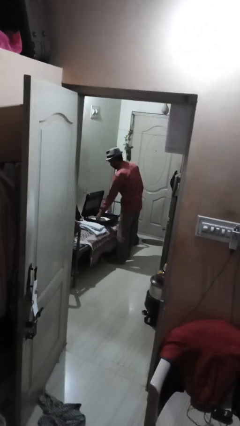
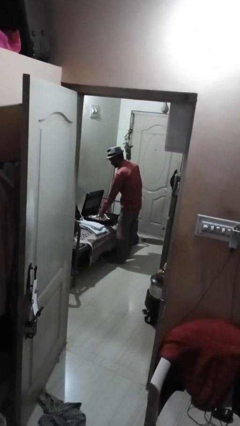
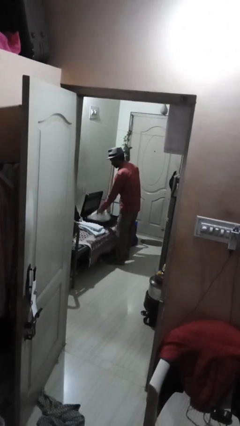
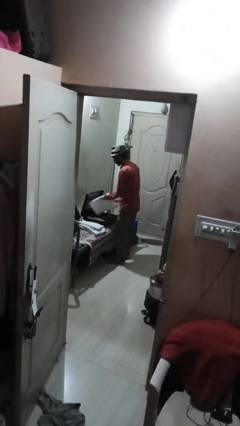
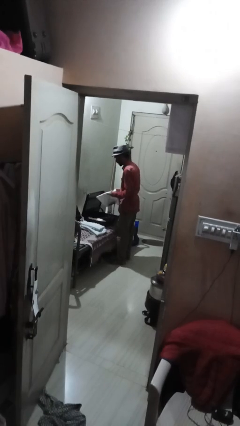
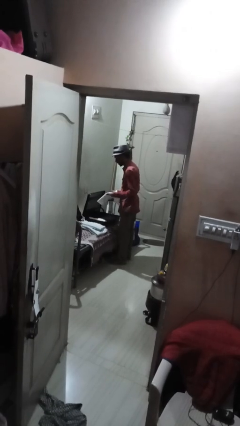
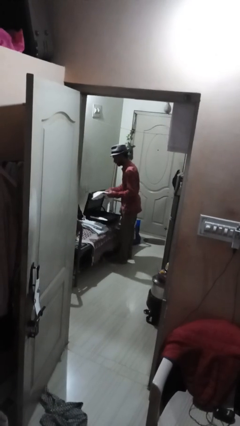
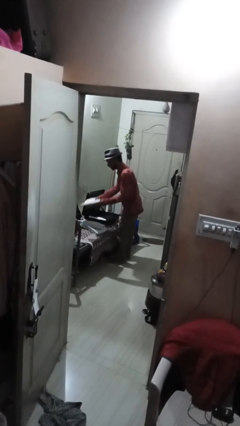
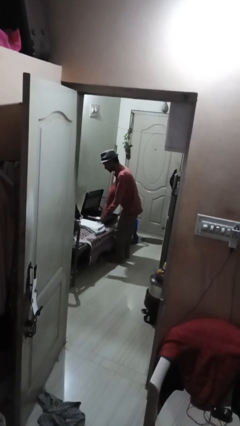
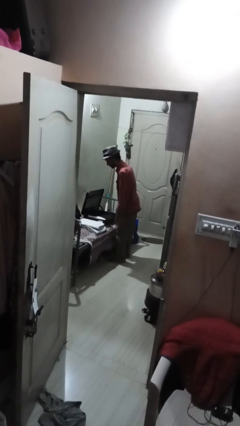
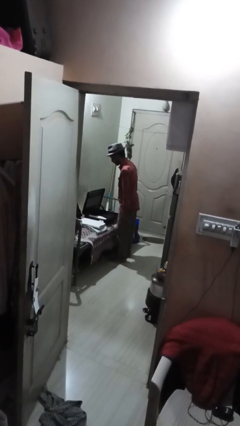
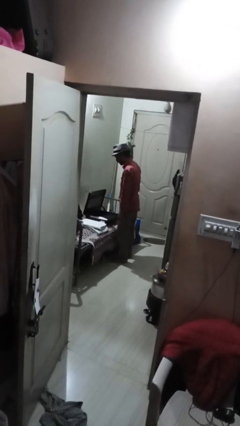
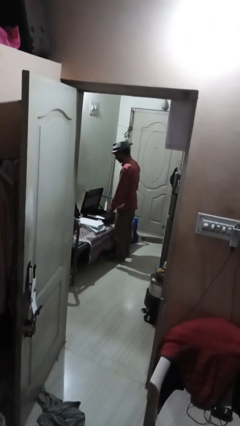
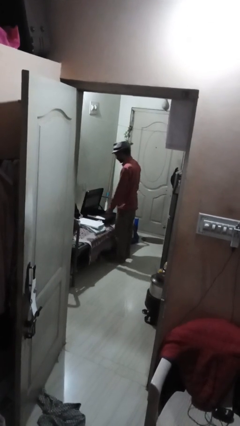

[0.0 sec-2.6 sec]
person unloads clothes from suitcase

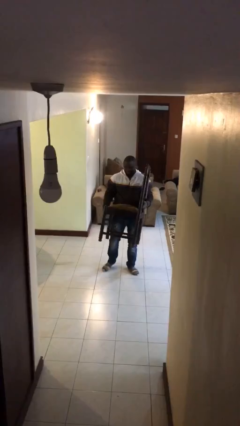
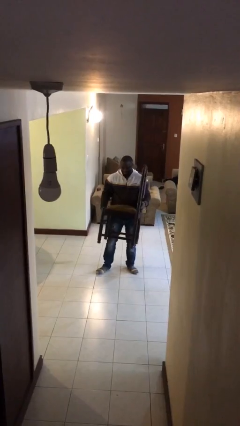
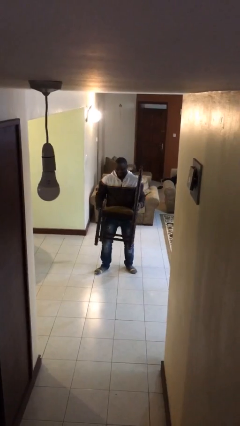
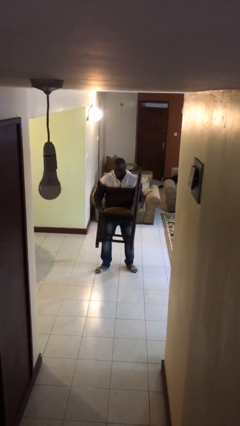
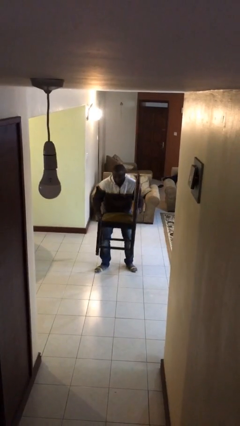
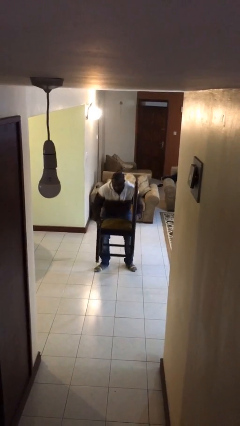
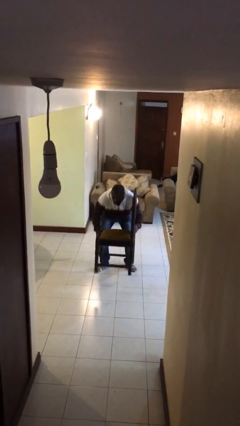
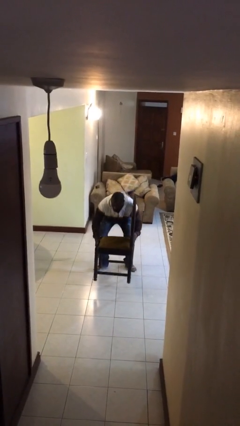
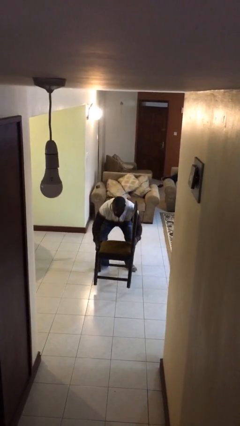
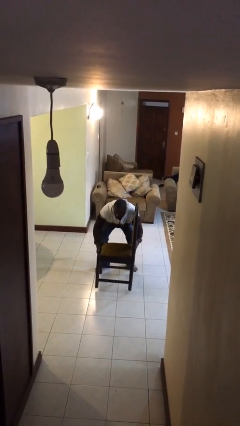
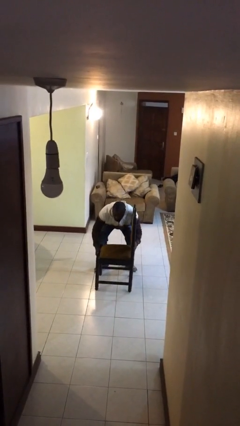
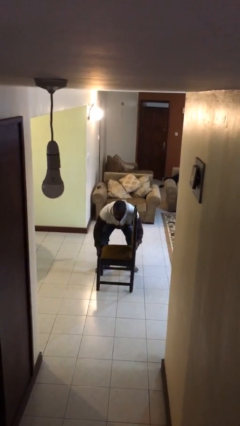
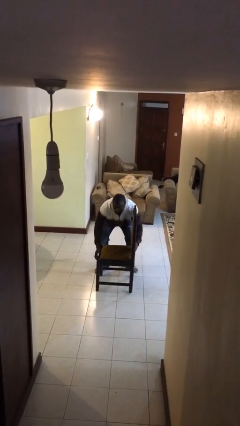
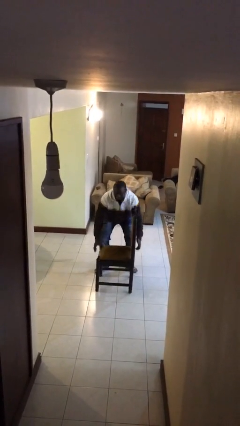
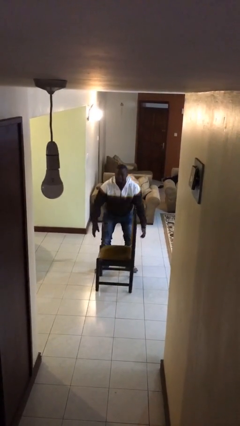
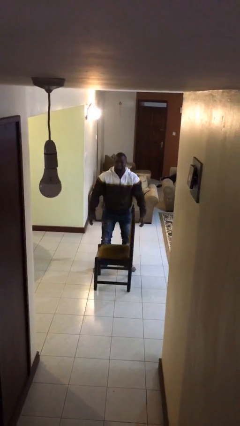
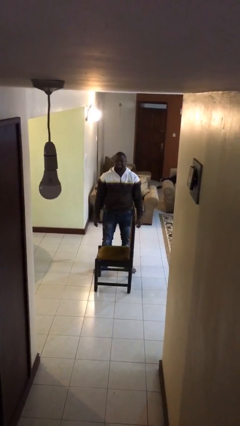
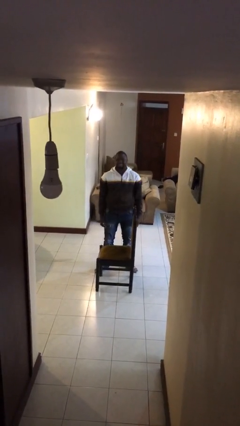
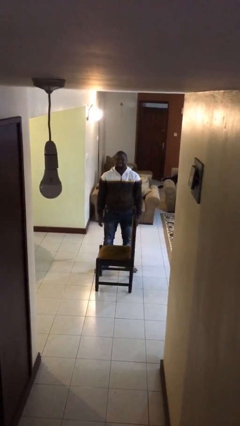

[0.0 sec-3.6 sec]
person puts down object on floor

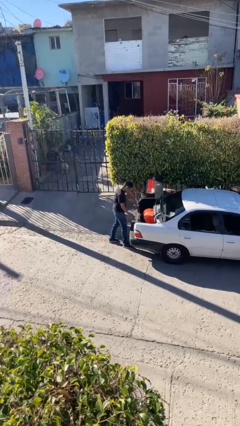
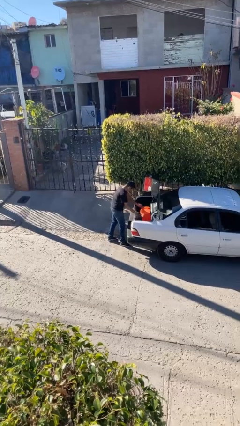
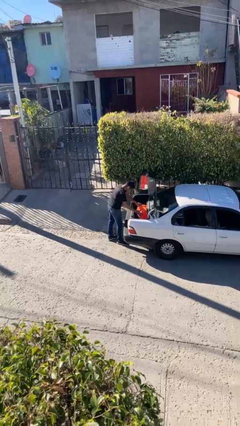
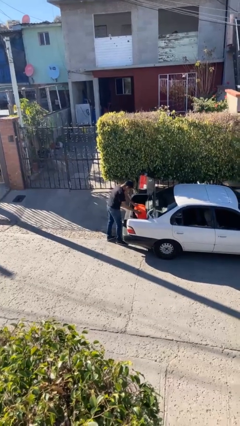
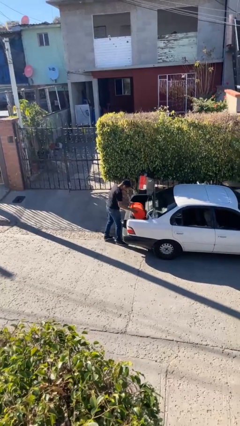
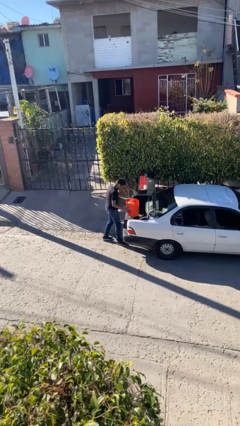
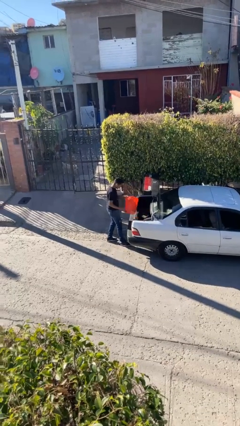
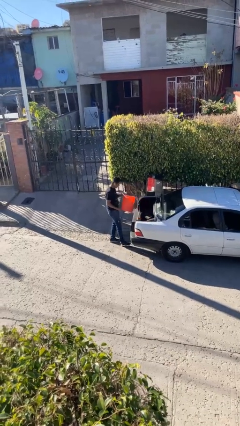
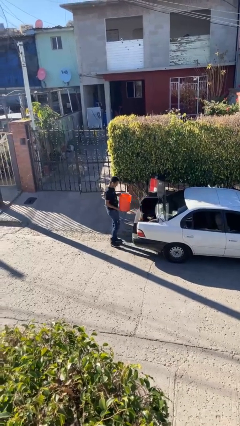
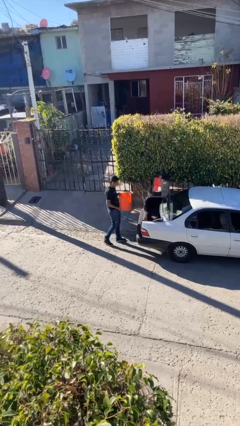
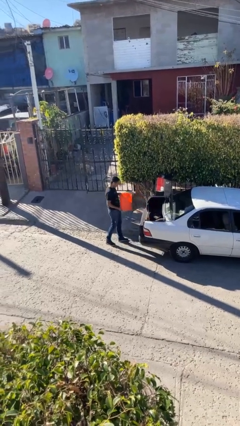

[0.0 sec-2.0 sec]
person unloads car

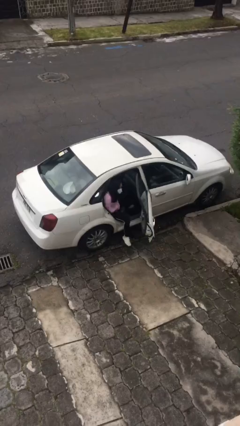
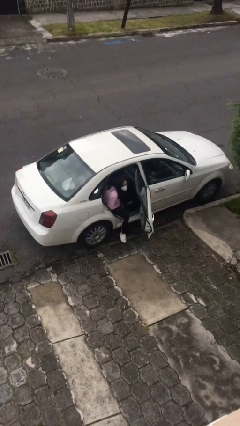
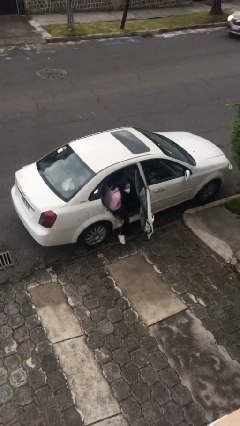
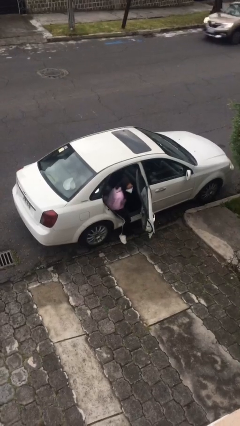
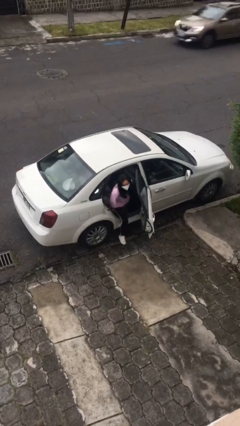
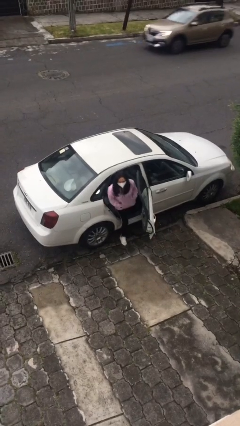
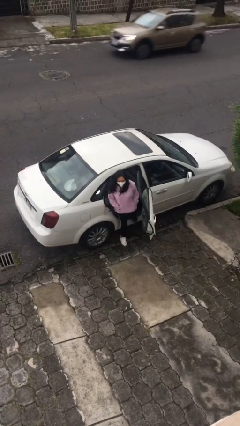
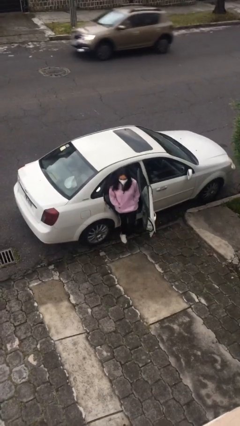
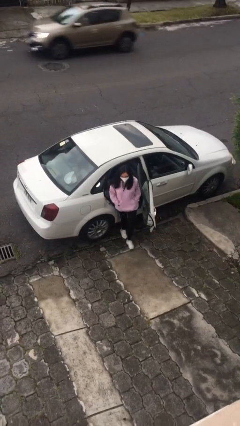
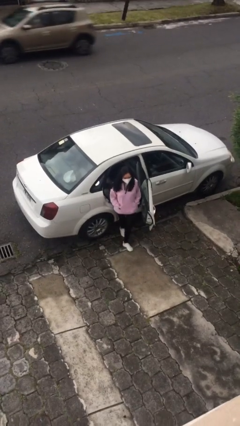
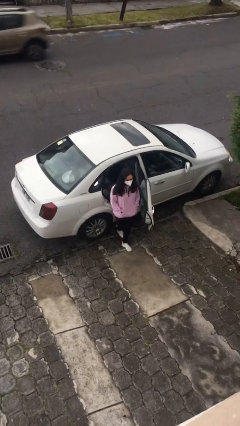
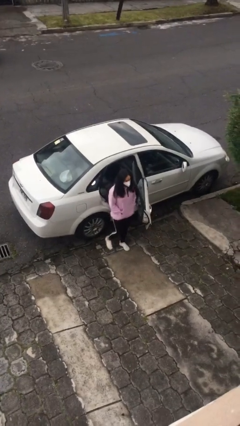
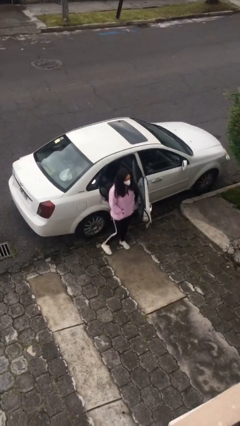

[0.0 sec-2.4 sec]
person exits car

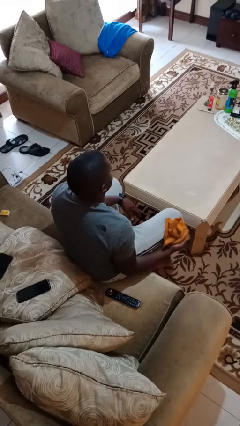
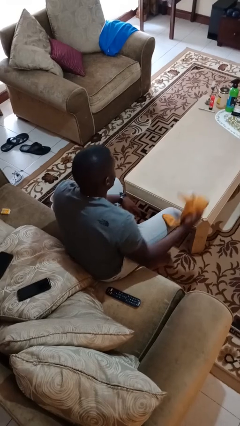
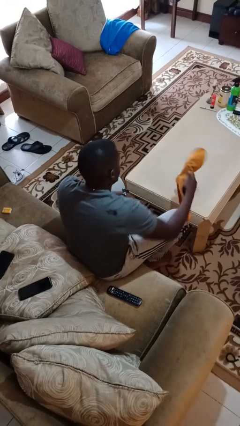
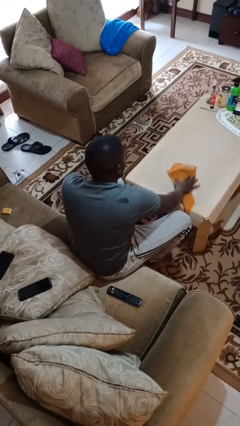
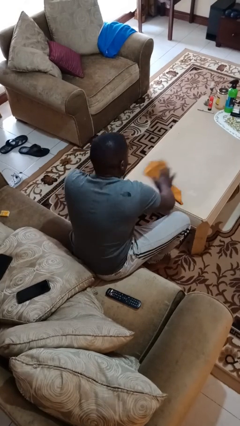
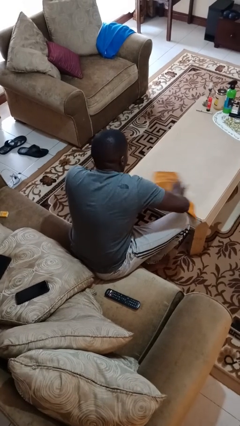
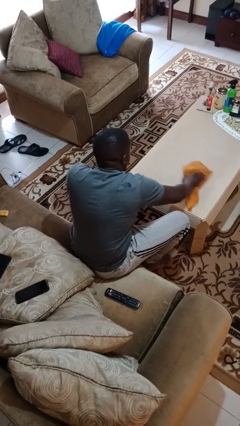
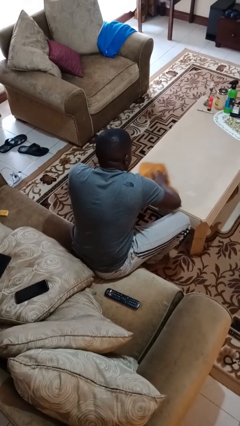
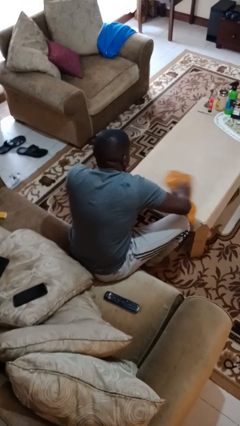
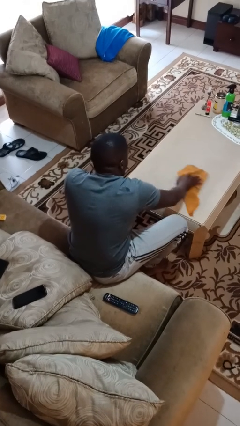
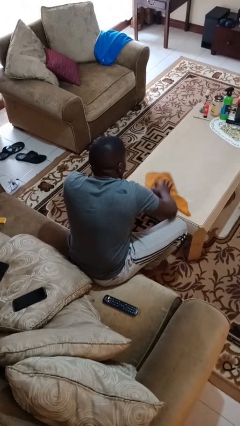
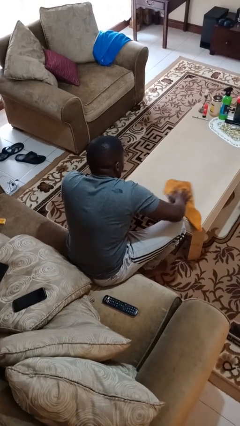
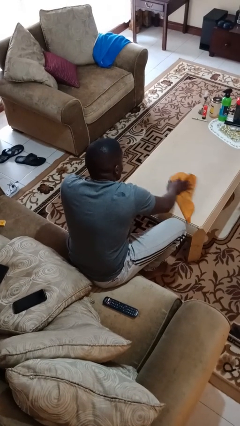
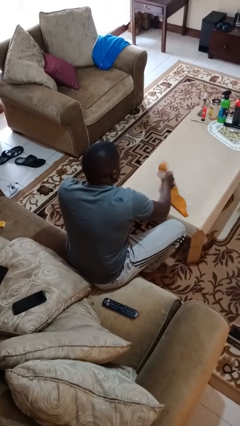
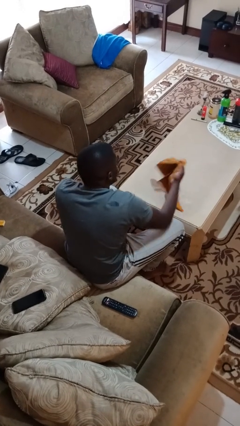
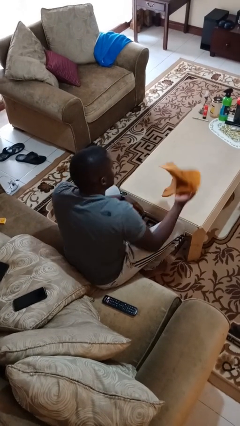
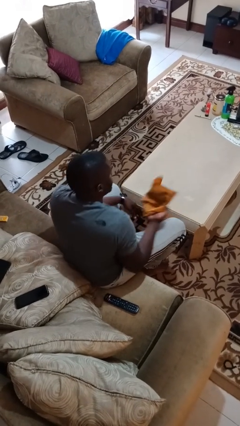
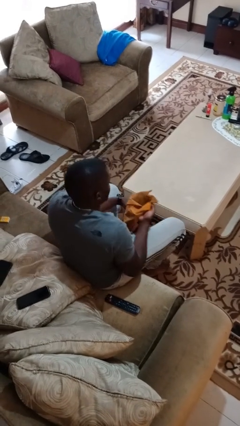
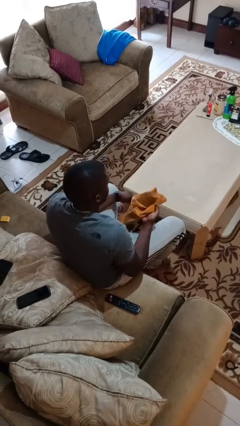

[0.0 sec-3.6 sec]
person cleans table with rag

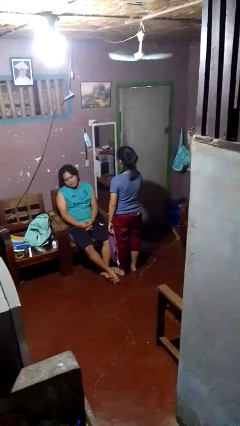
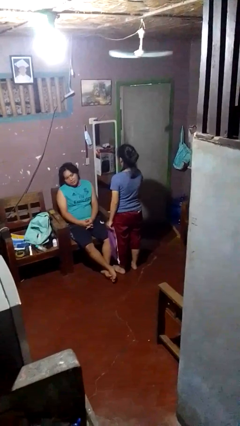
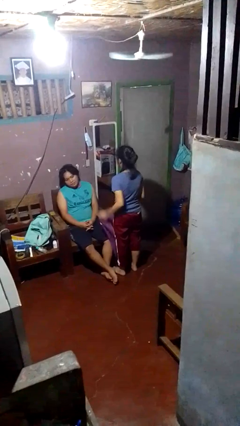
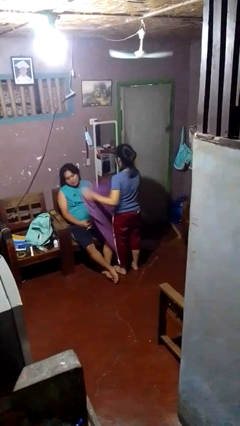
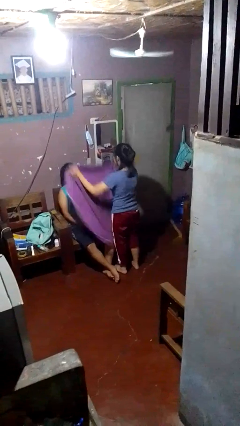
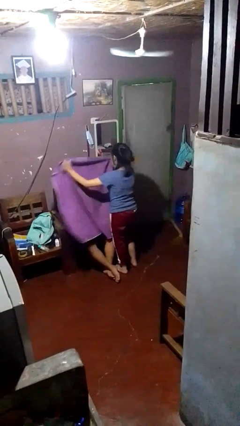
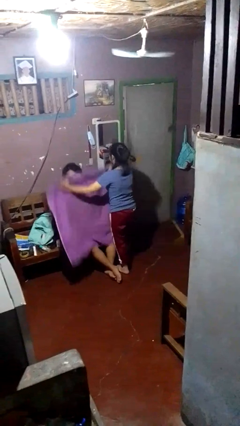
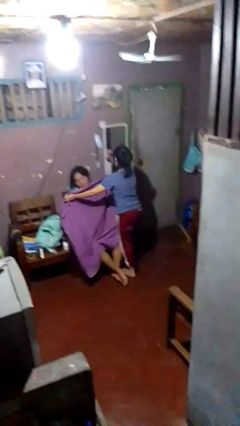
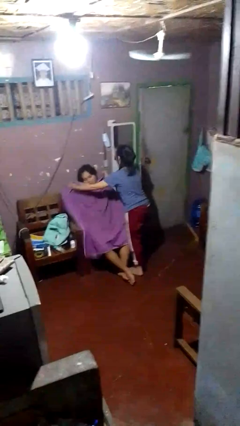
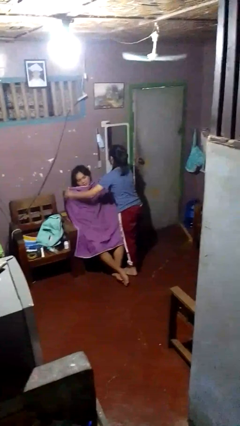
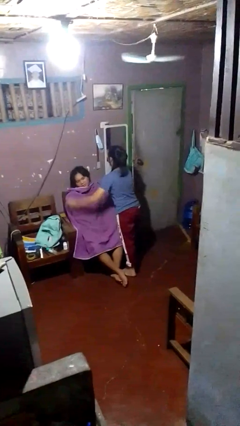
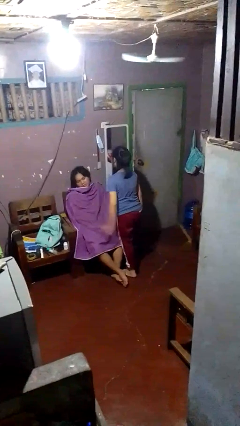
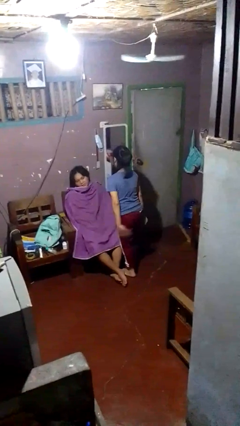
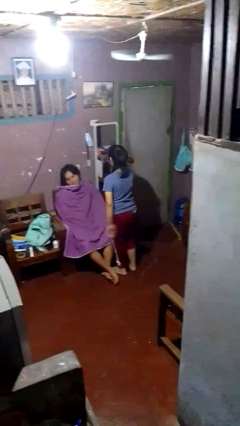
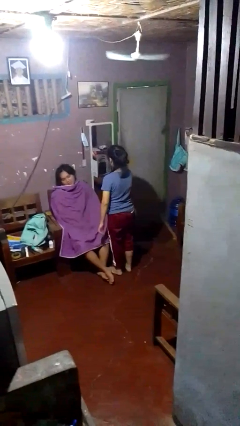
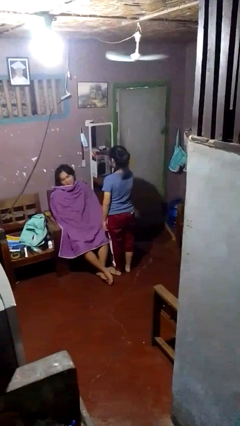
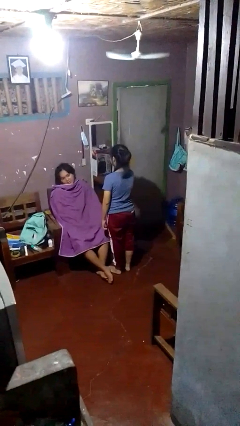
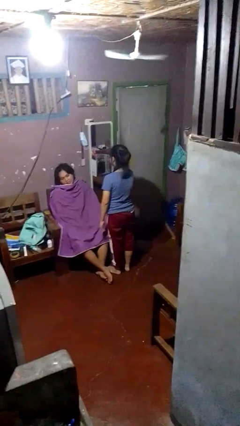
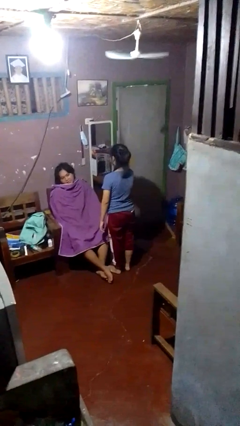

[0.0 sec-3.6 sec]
person covers friend with blanket
